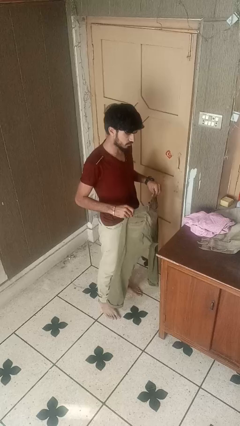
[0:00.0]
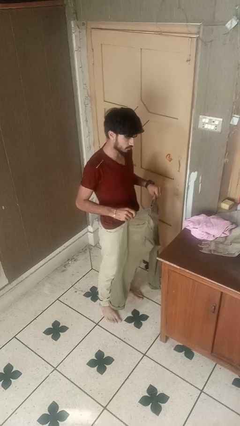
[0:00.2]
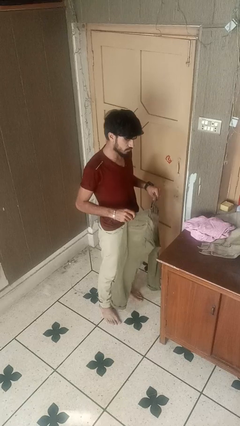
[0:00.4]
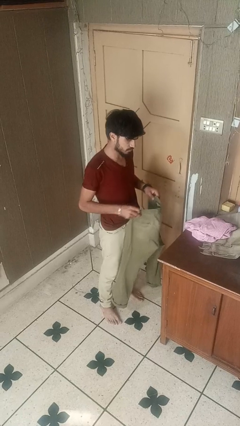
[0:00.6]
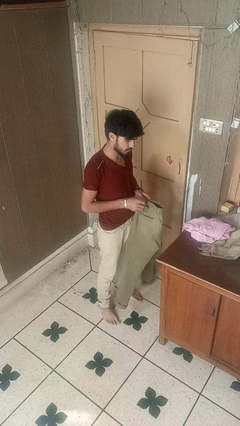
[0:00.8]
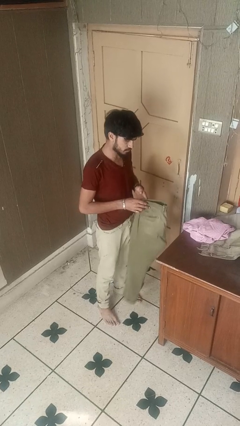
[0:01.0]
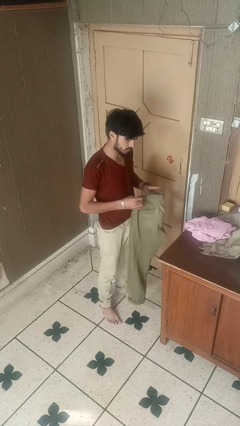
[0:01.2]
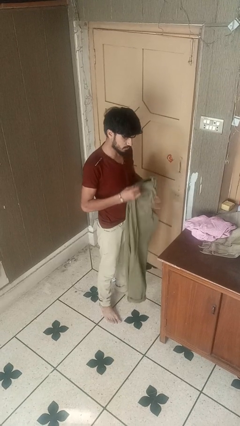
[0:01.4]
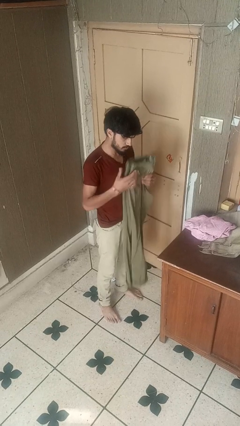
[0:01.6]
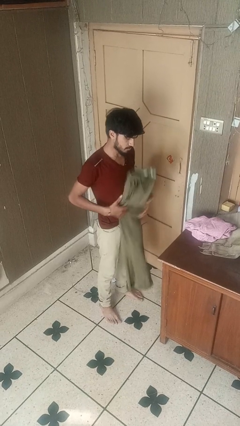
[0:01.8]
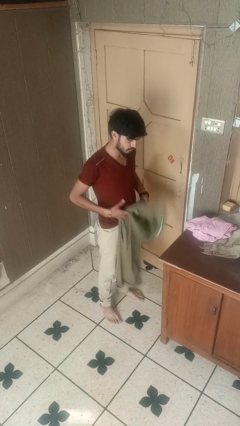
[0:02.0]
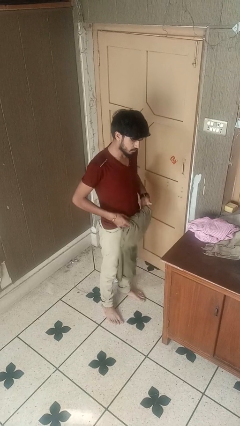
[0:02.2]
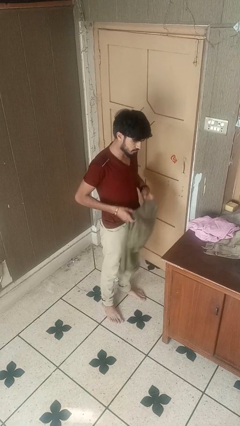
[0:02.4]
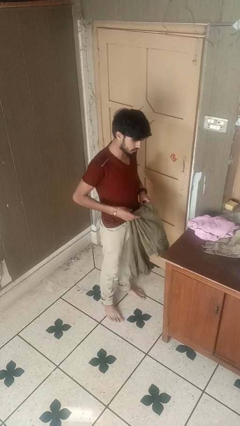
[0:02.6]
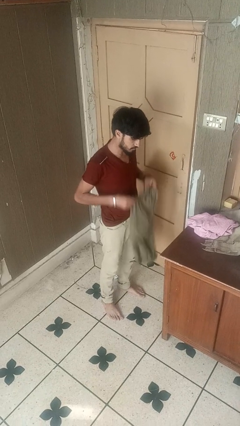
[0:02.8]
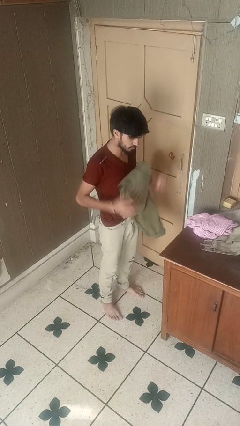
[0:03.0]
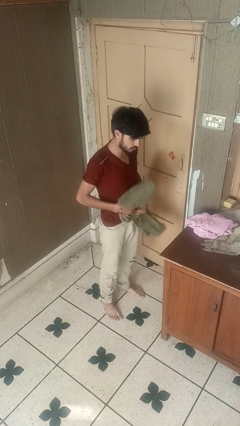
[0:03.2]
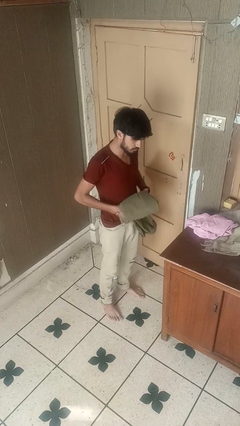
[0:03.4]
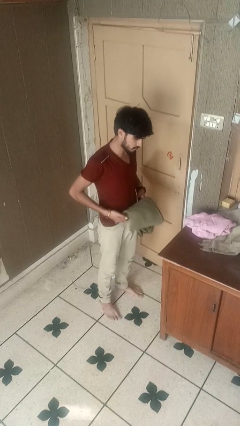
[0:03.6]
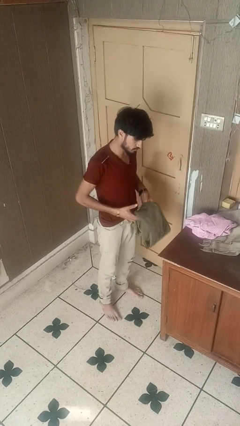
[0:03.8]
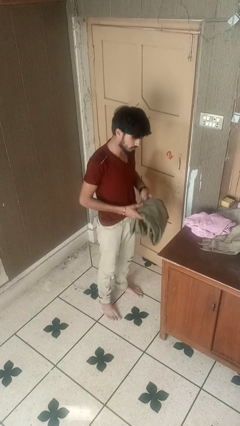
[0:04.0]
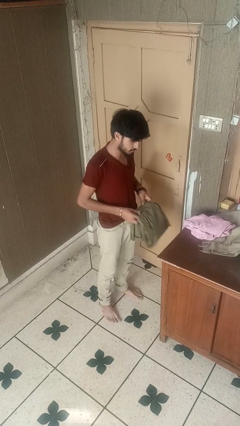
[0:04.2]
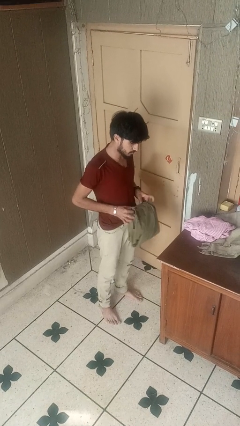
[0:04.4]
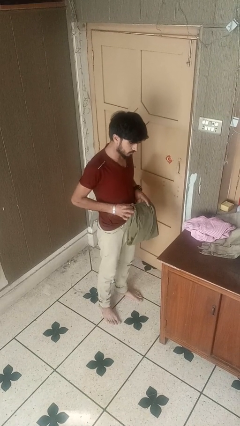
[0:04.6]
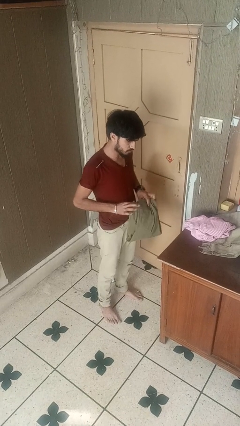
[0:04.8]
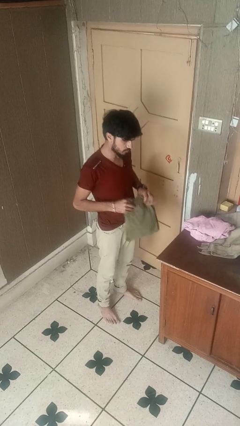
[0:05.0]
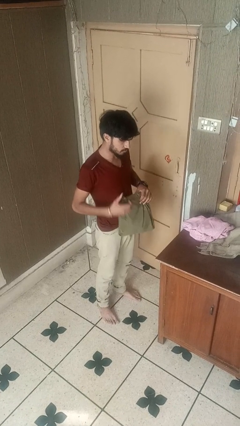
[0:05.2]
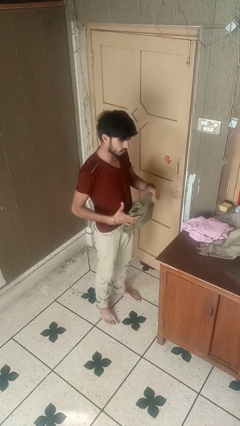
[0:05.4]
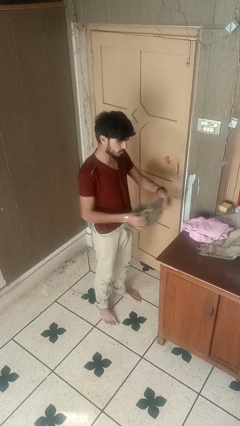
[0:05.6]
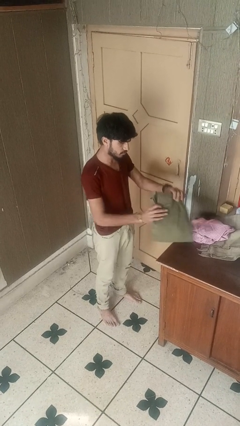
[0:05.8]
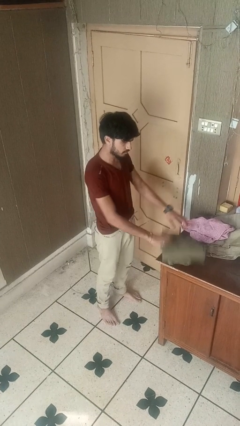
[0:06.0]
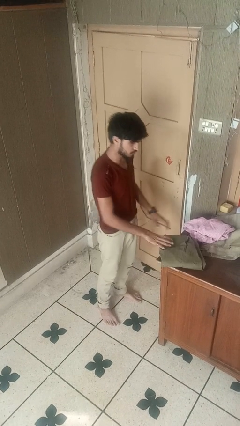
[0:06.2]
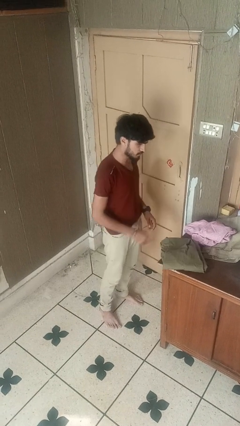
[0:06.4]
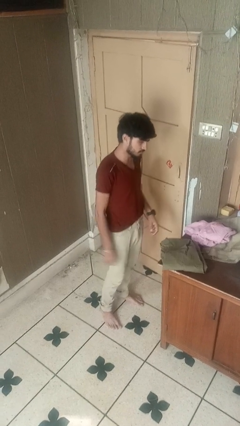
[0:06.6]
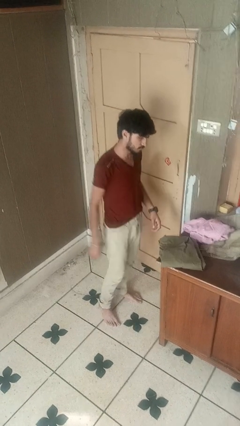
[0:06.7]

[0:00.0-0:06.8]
person folds pants

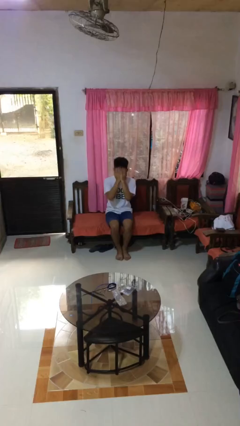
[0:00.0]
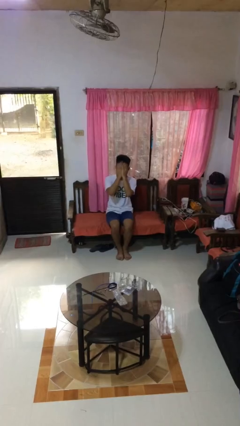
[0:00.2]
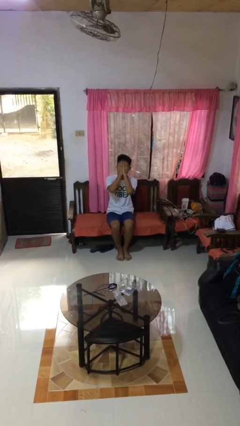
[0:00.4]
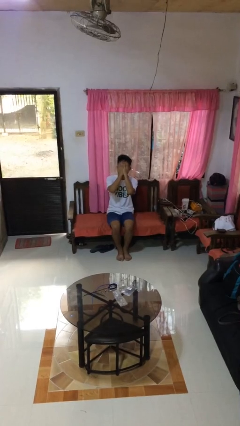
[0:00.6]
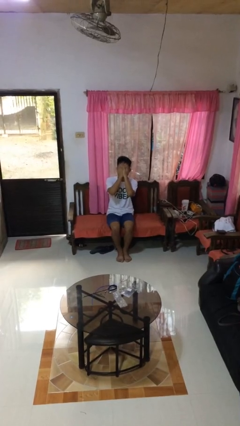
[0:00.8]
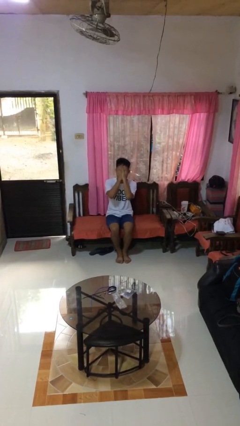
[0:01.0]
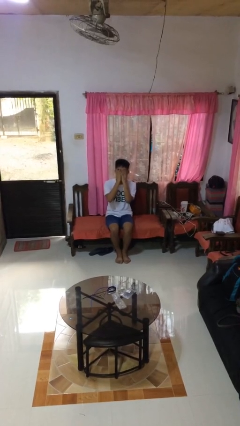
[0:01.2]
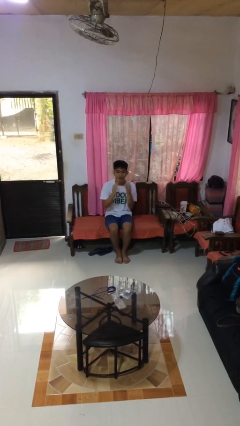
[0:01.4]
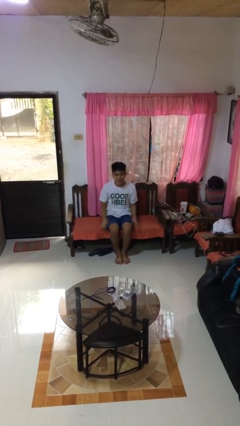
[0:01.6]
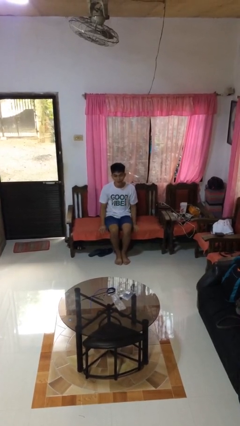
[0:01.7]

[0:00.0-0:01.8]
person covers face with hands

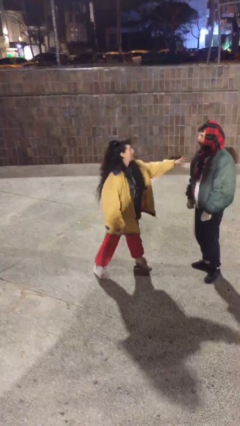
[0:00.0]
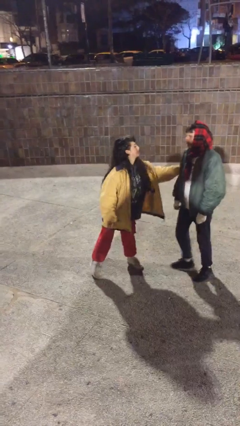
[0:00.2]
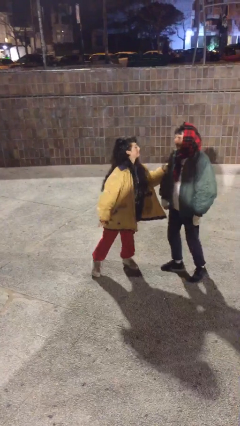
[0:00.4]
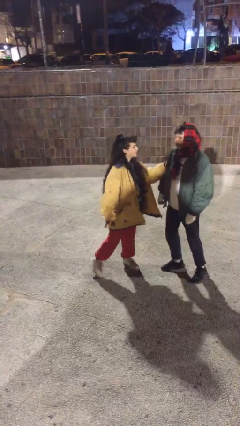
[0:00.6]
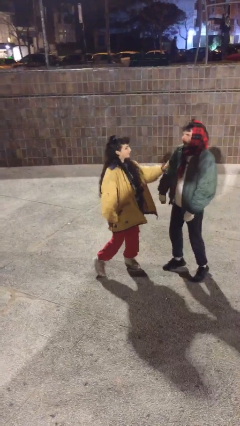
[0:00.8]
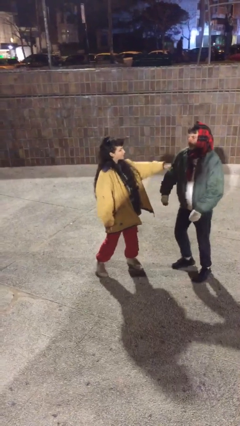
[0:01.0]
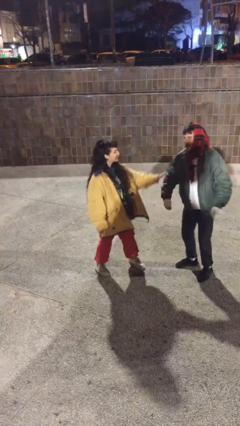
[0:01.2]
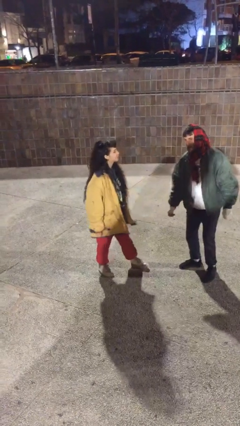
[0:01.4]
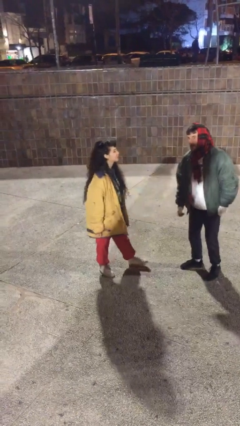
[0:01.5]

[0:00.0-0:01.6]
person grabs person by bicep

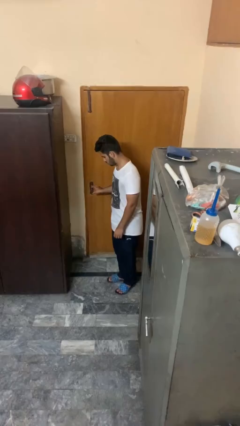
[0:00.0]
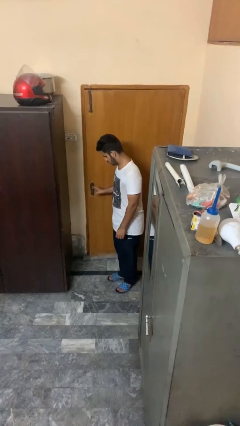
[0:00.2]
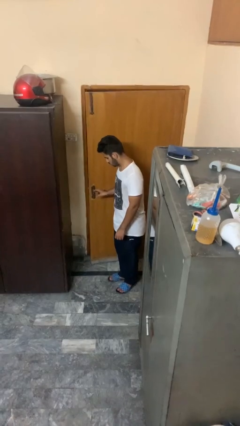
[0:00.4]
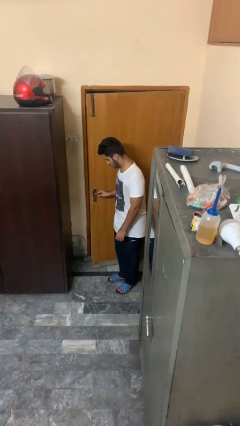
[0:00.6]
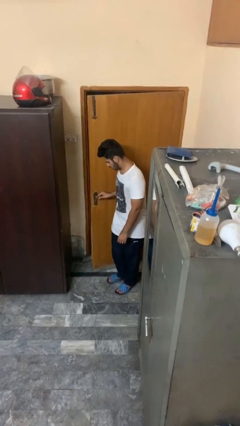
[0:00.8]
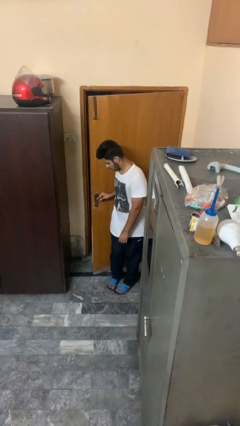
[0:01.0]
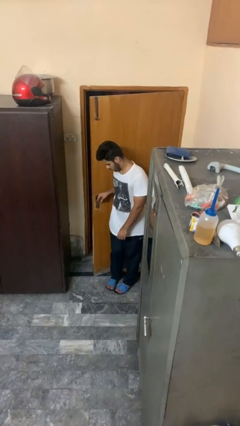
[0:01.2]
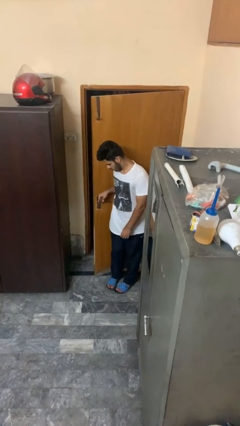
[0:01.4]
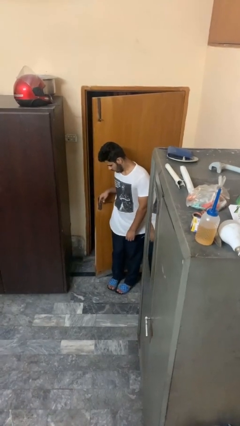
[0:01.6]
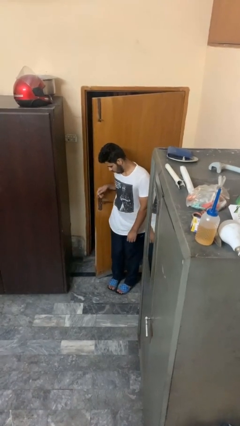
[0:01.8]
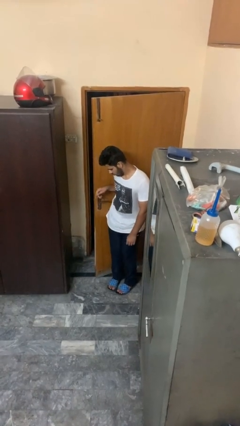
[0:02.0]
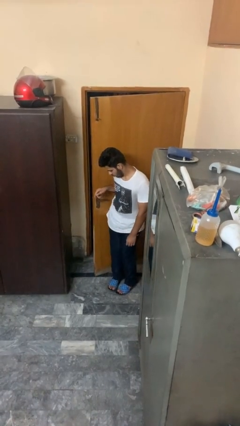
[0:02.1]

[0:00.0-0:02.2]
person opens facility door

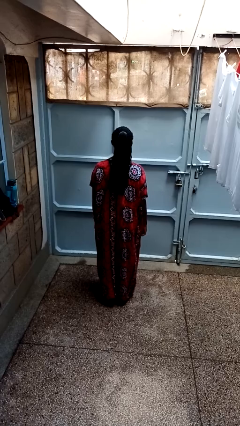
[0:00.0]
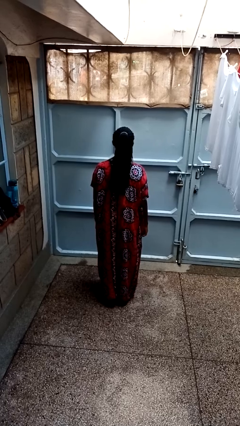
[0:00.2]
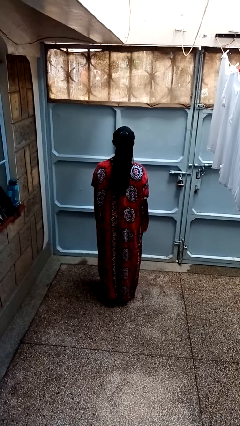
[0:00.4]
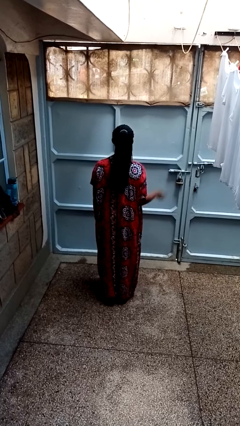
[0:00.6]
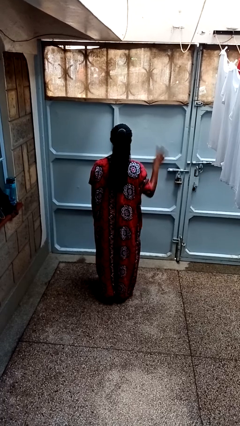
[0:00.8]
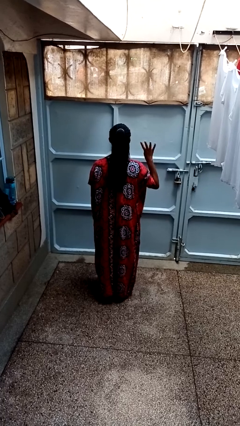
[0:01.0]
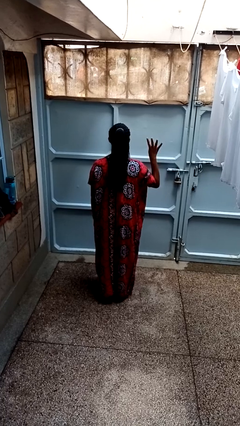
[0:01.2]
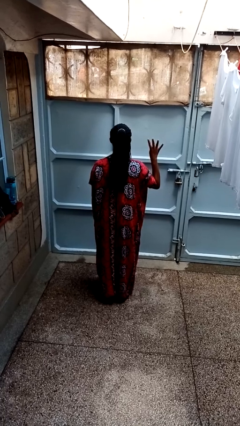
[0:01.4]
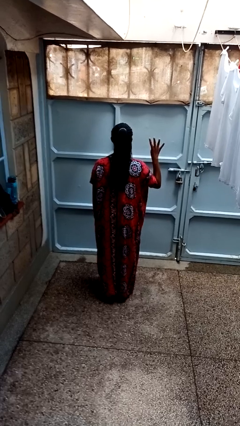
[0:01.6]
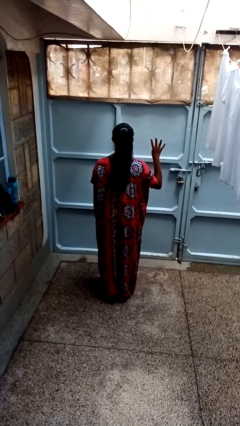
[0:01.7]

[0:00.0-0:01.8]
person gestures number four

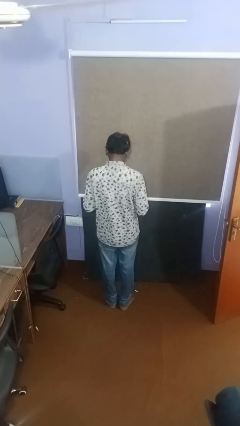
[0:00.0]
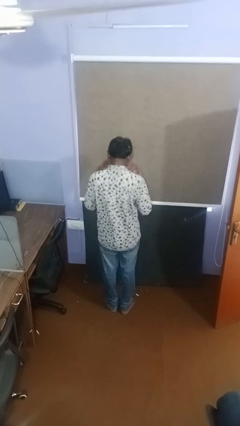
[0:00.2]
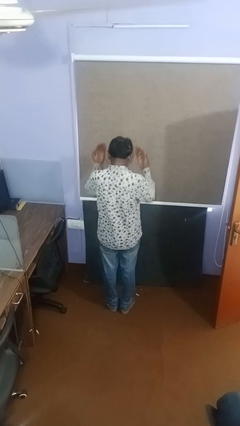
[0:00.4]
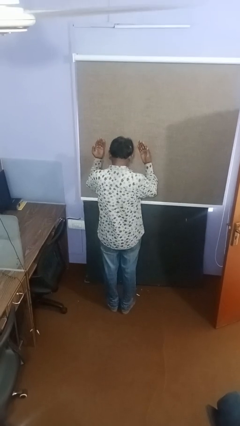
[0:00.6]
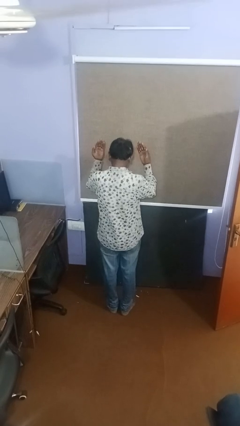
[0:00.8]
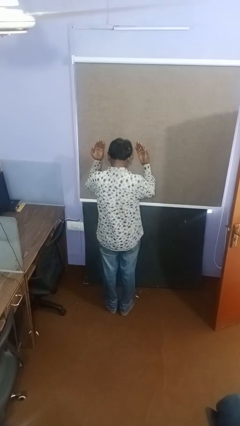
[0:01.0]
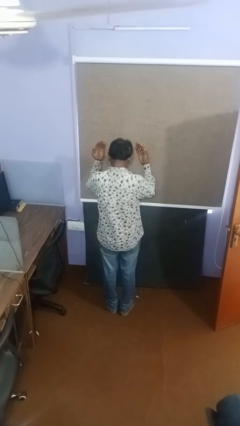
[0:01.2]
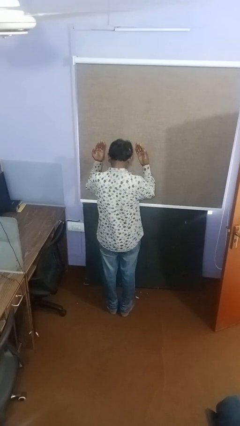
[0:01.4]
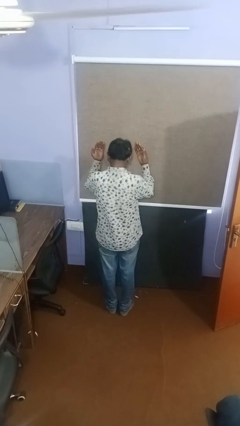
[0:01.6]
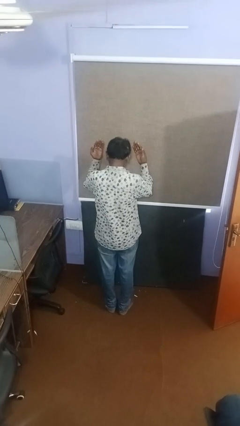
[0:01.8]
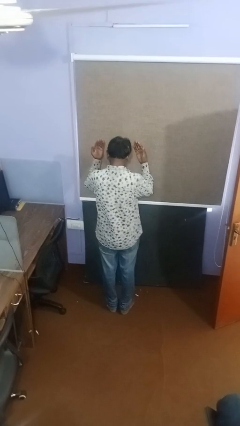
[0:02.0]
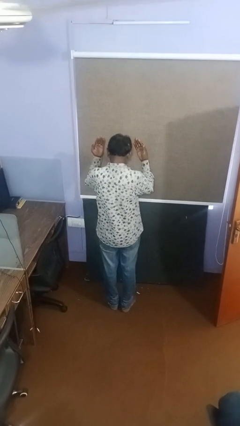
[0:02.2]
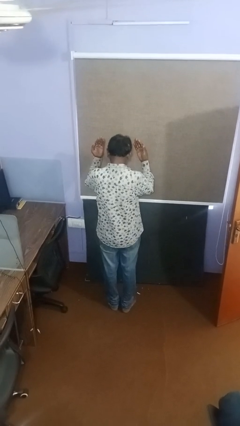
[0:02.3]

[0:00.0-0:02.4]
person gestures swipe up

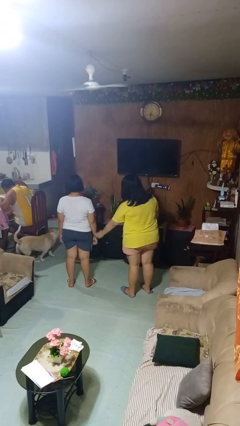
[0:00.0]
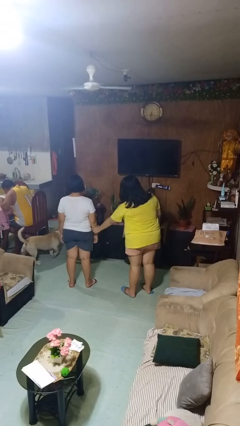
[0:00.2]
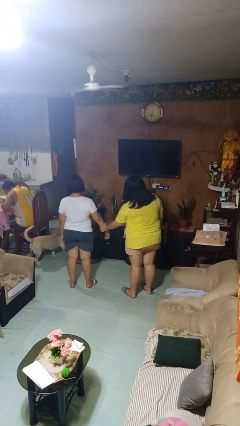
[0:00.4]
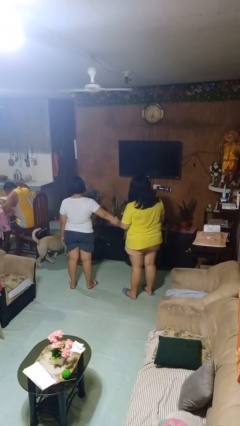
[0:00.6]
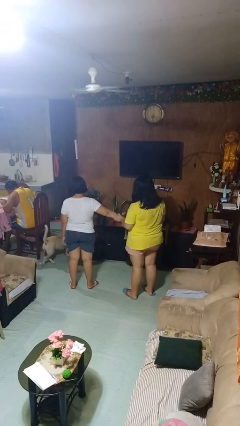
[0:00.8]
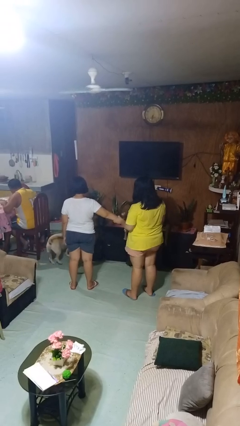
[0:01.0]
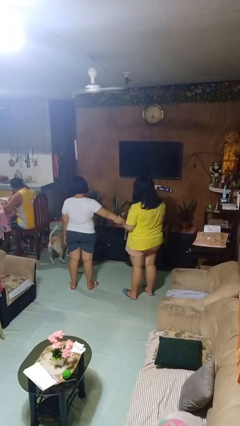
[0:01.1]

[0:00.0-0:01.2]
person grabs person by forearm
